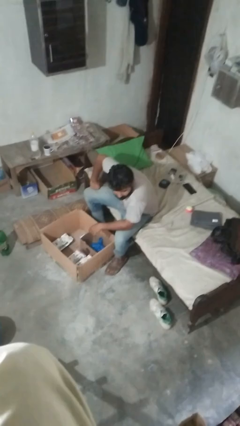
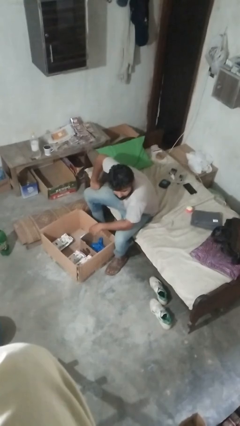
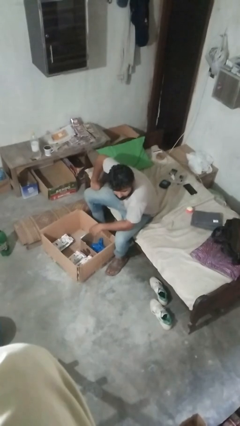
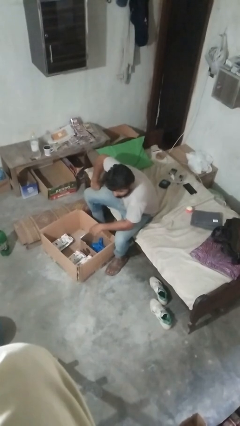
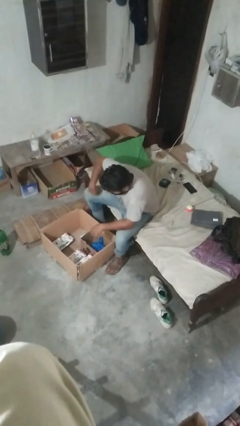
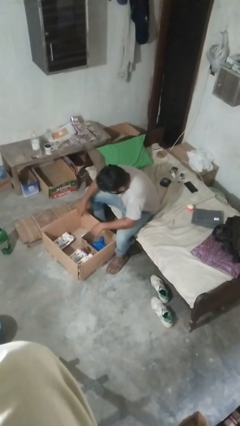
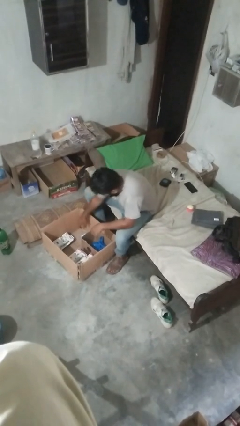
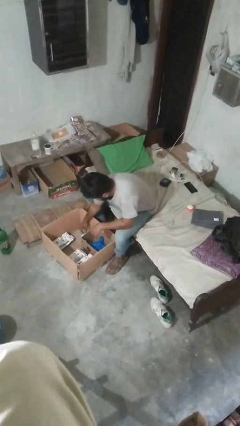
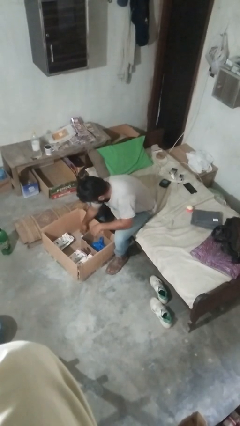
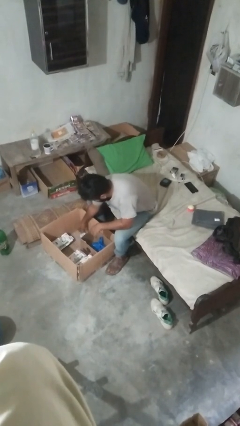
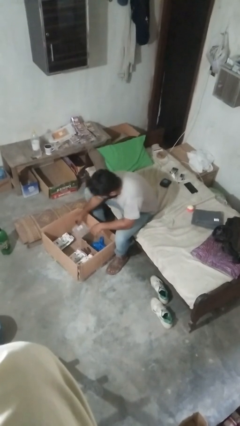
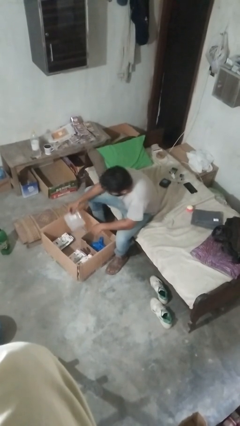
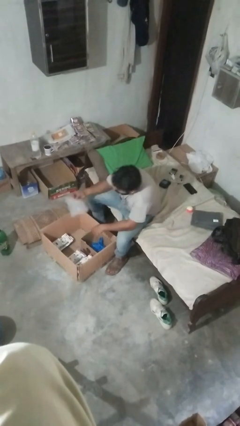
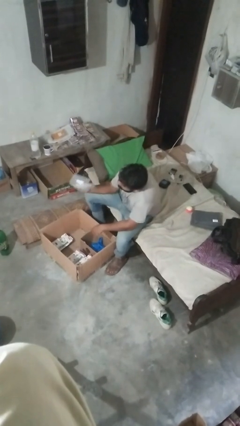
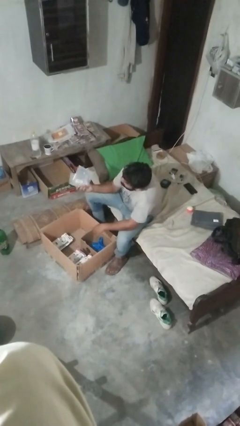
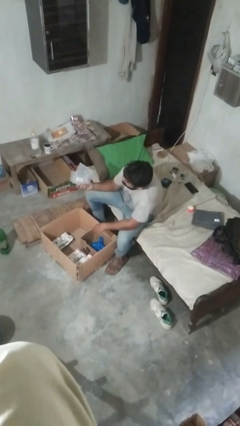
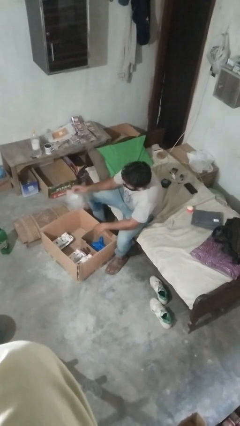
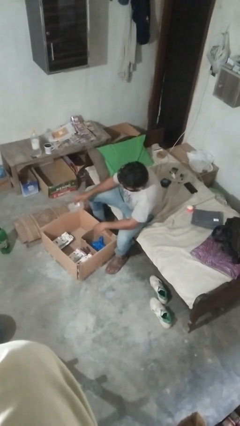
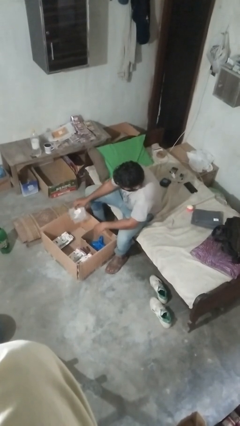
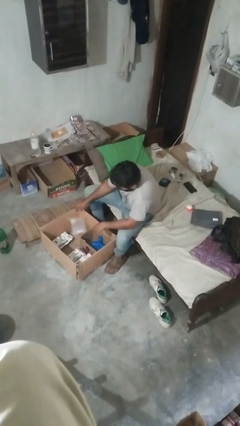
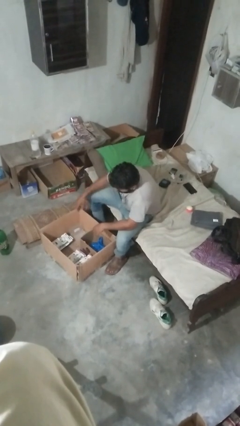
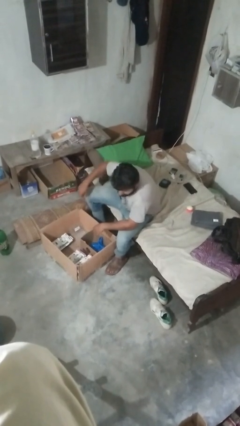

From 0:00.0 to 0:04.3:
person searches in box

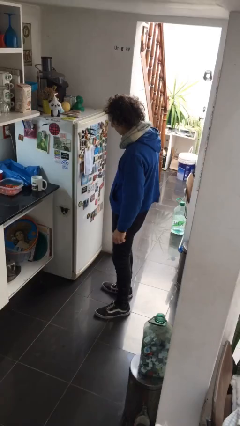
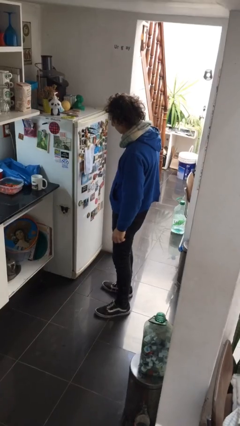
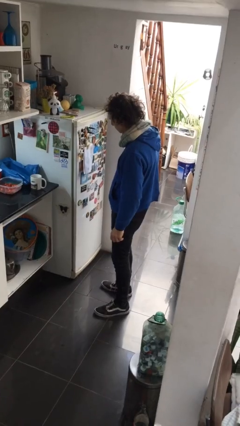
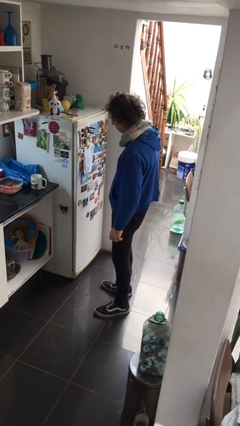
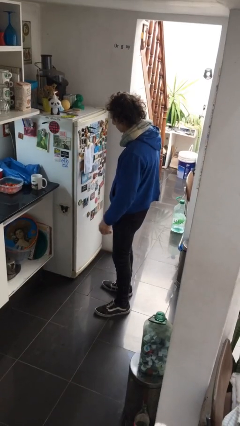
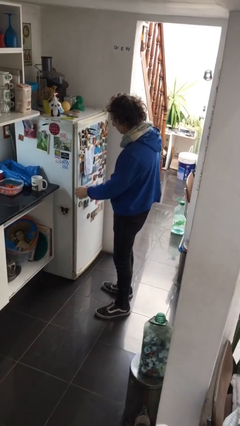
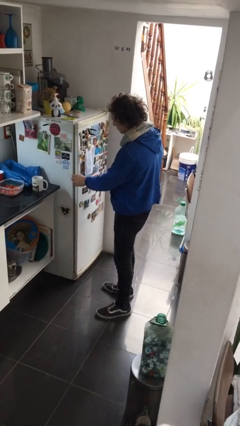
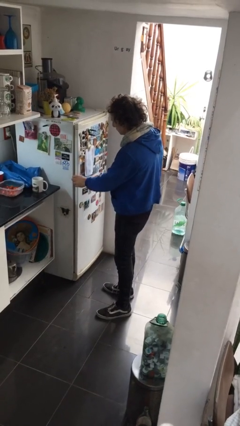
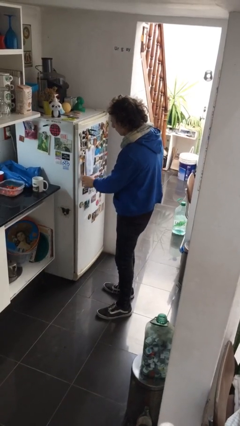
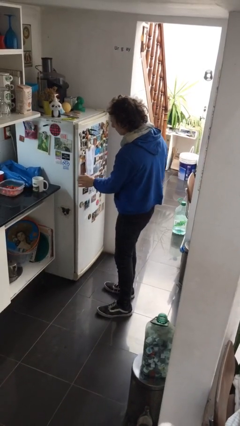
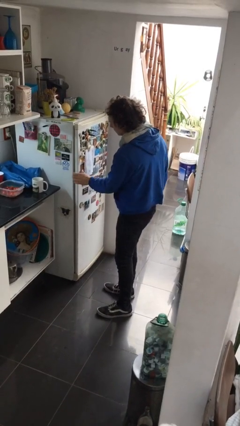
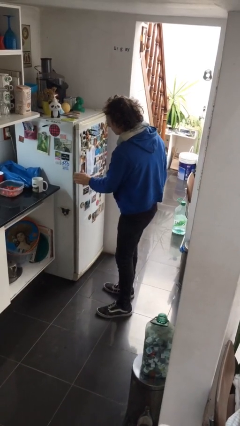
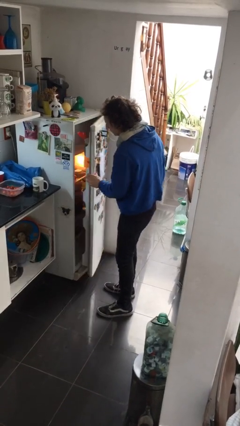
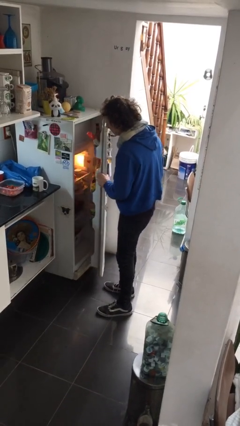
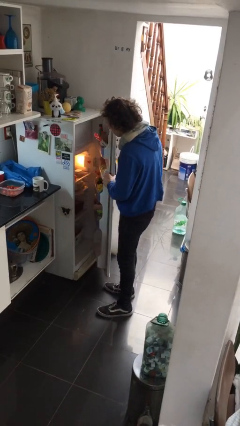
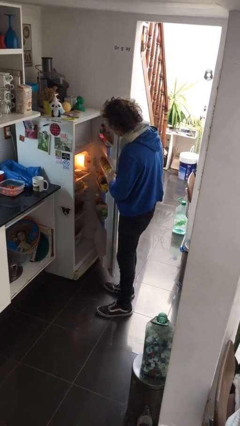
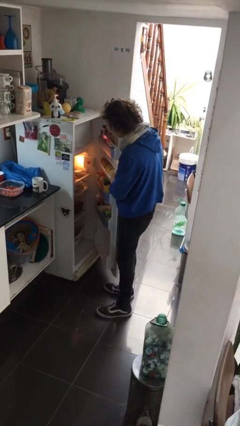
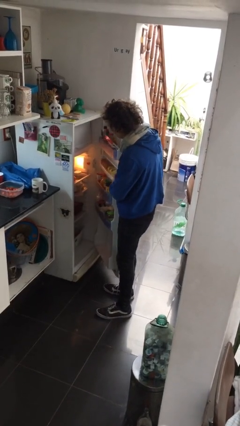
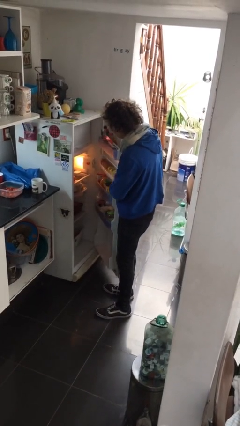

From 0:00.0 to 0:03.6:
person opens refrigerator

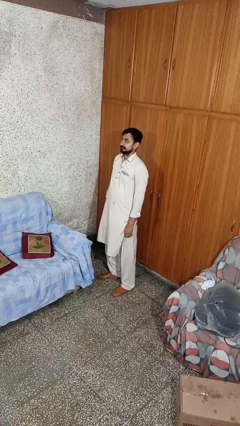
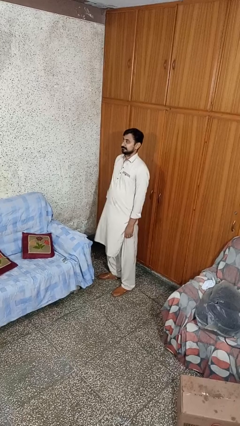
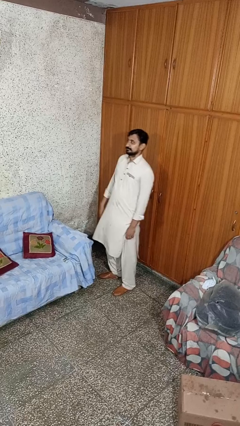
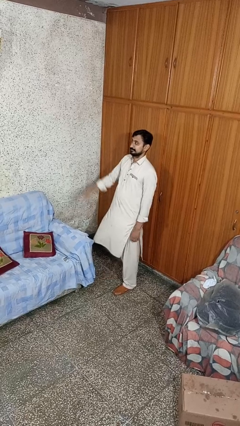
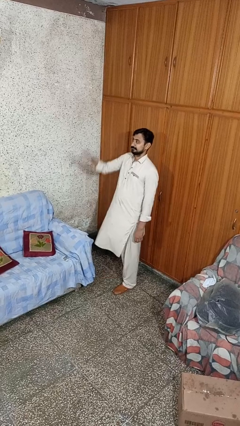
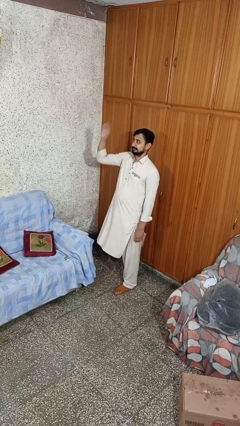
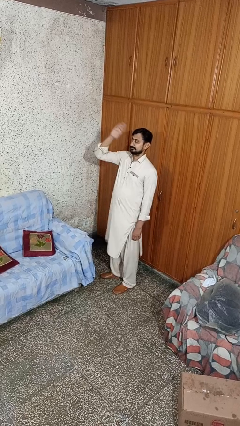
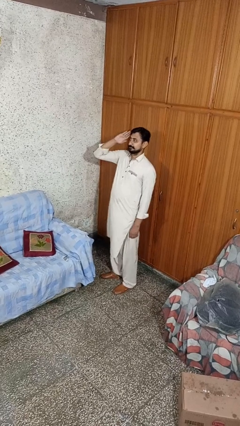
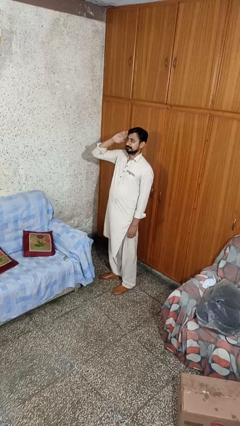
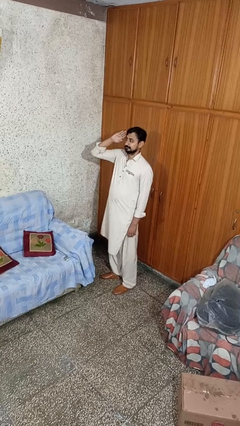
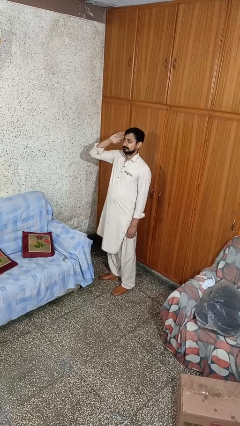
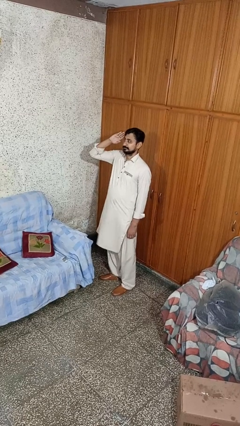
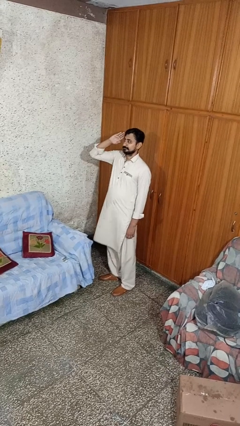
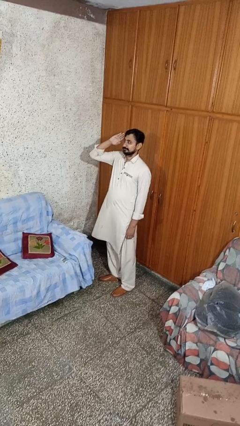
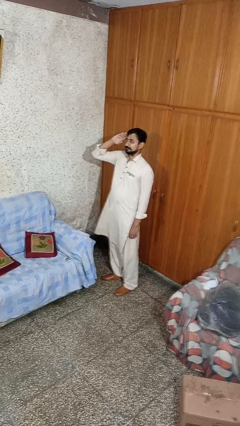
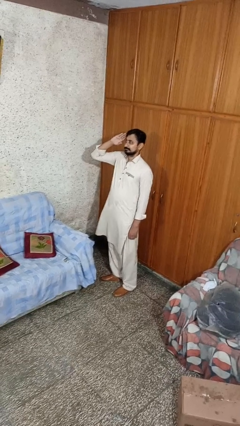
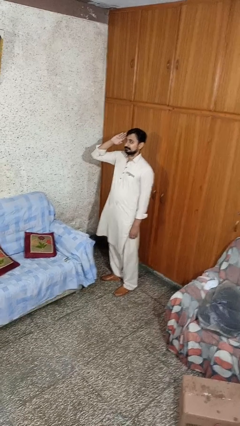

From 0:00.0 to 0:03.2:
person salutes

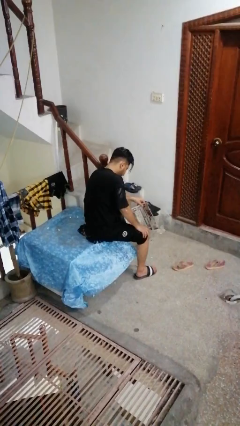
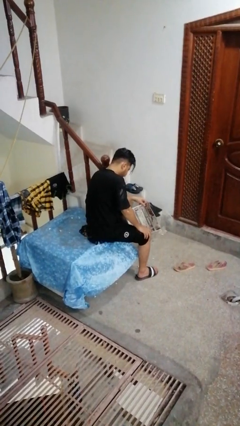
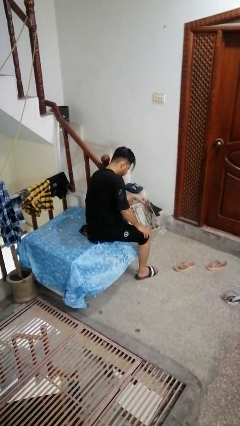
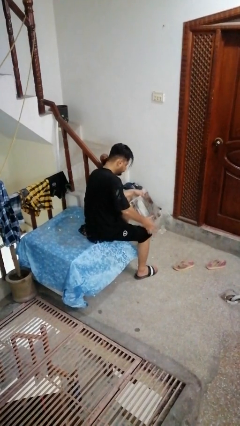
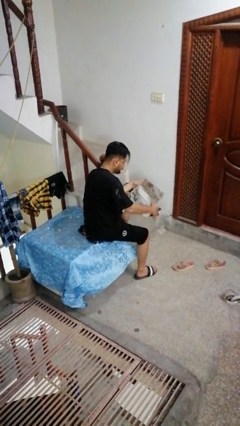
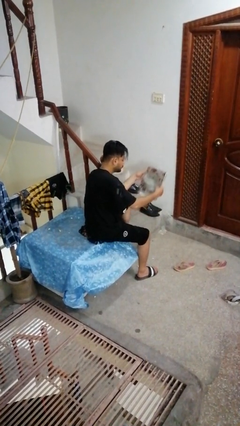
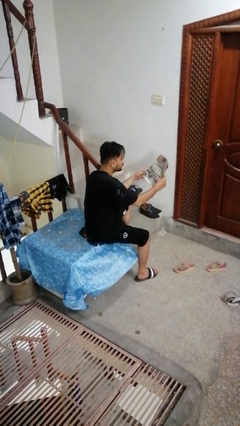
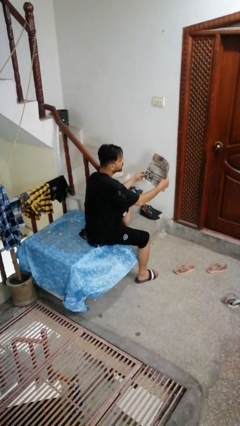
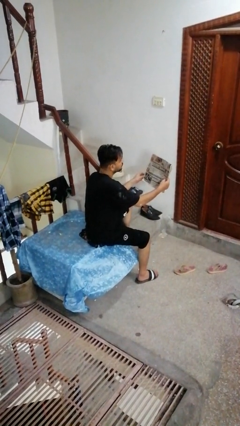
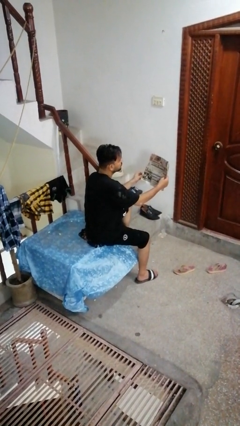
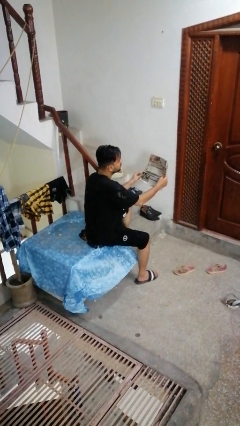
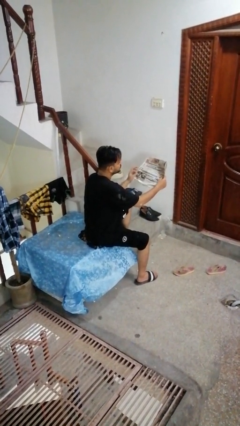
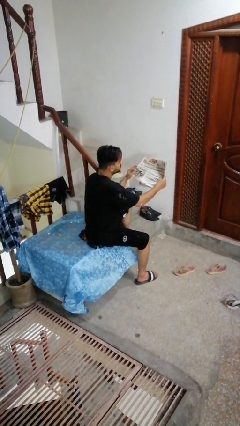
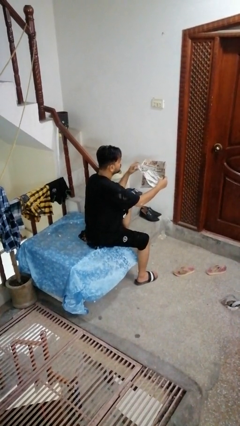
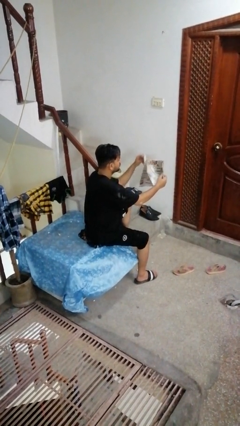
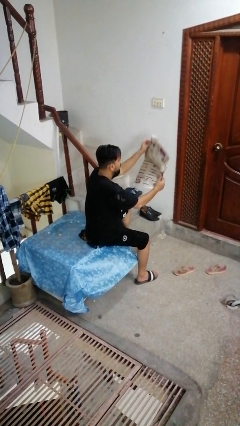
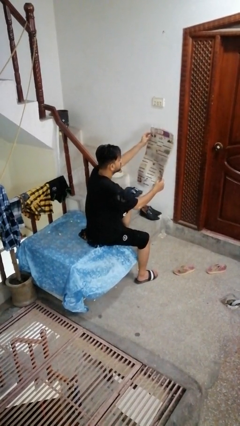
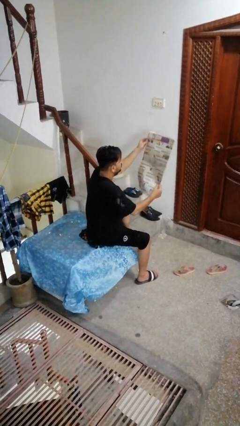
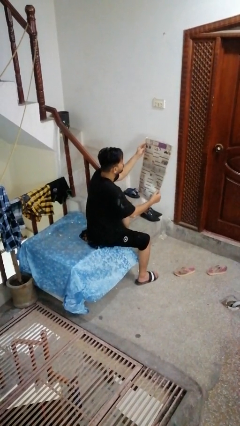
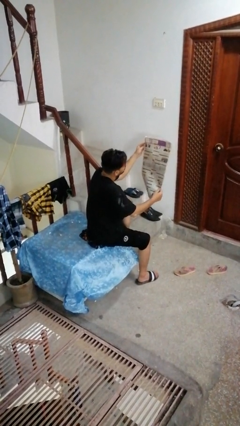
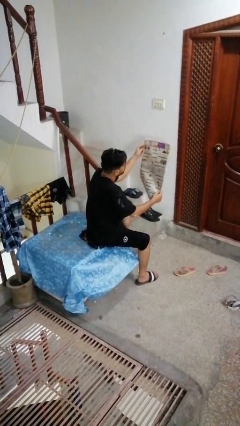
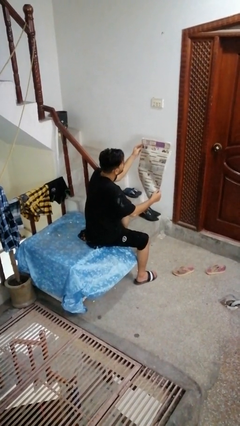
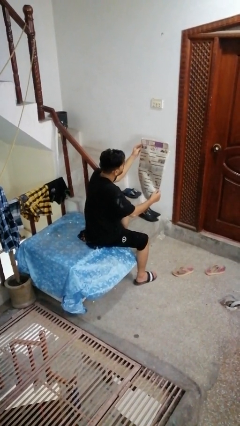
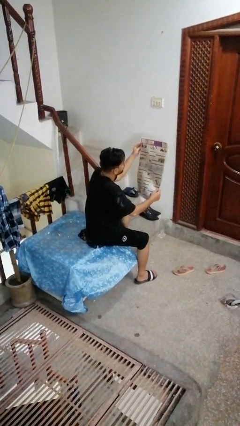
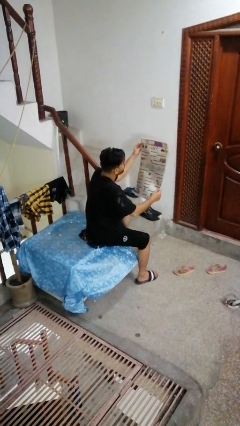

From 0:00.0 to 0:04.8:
person reads newspaper

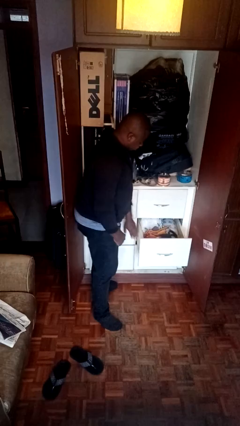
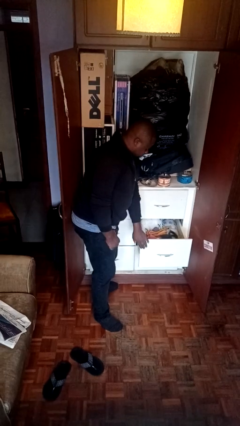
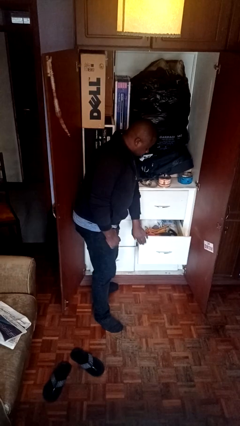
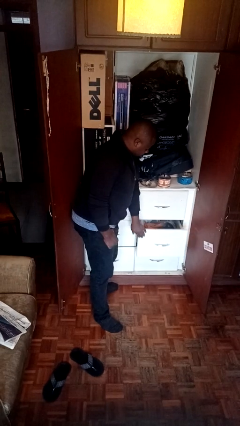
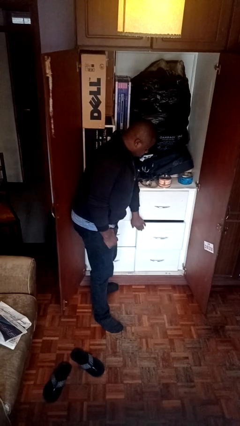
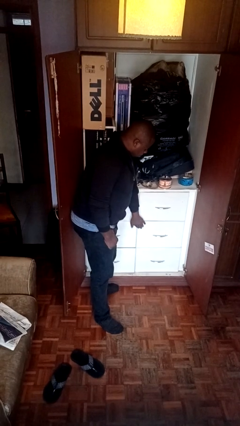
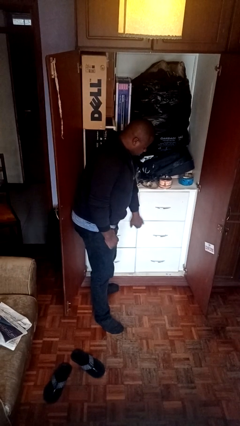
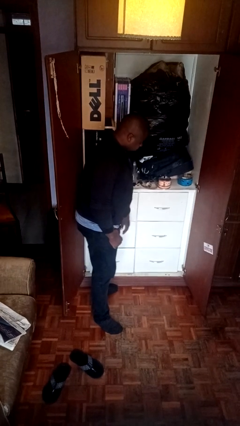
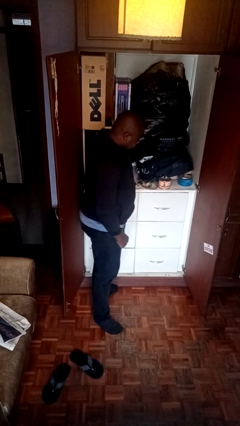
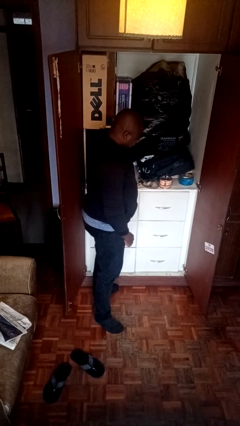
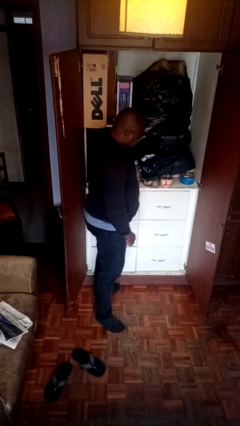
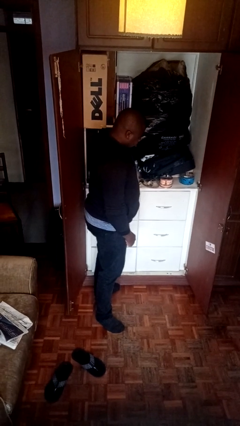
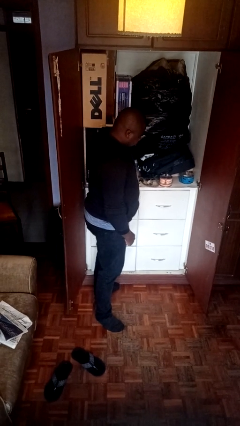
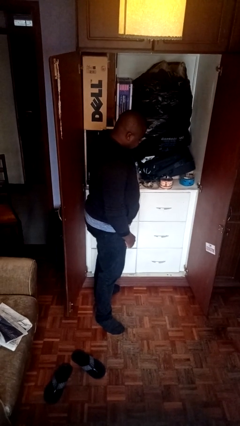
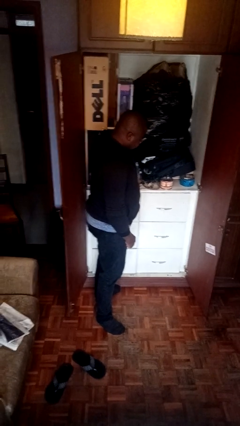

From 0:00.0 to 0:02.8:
person closes dresser drawer
